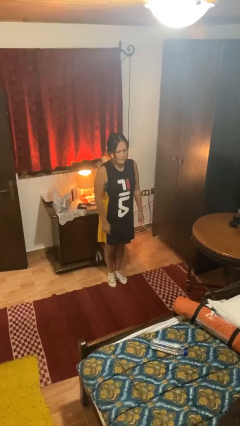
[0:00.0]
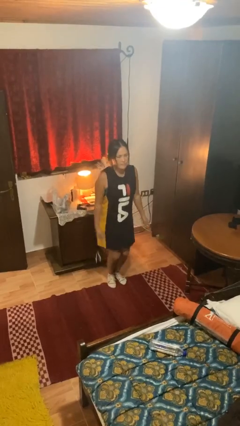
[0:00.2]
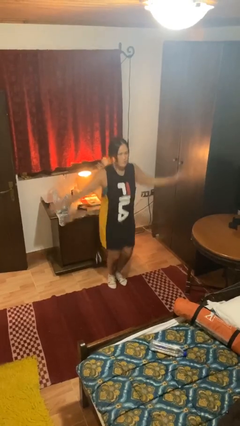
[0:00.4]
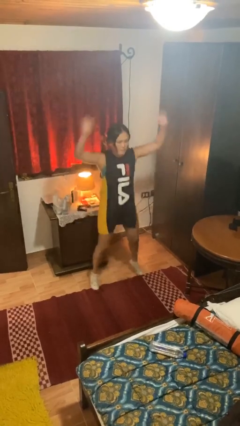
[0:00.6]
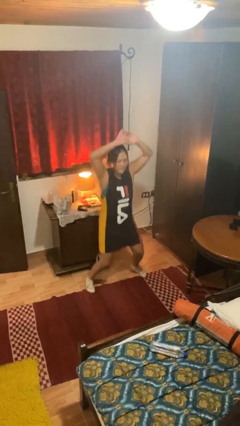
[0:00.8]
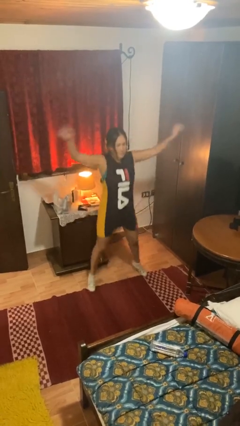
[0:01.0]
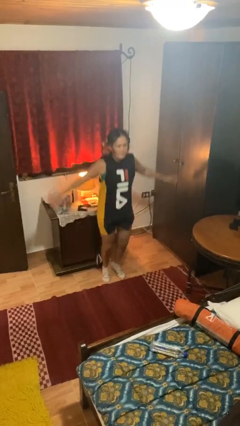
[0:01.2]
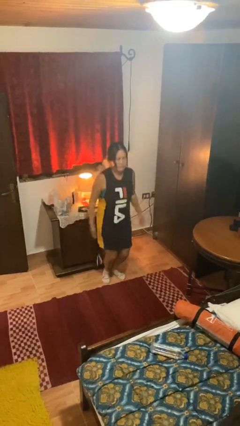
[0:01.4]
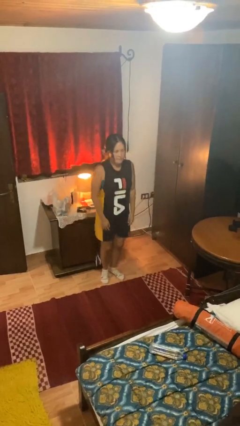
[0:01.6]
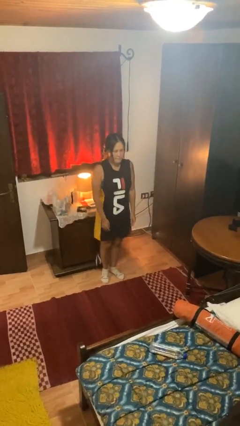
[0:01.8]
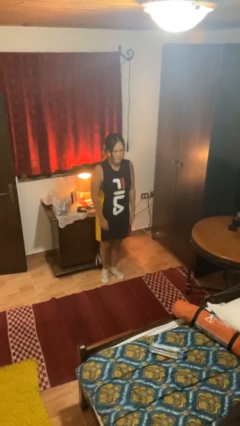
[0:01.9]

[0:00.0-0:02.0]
person exercises with jumping jacks

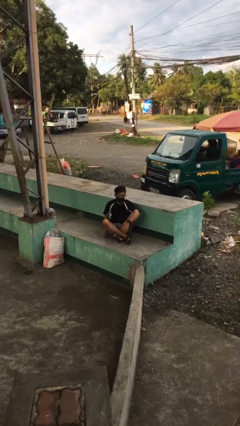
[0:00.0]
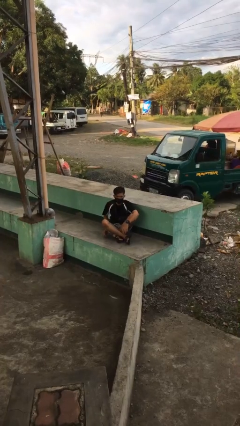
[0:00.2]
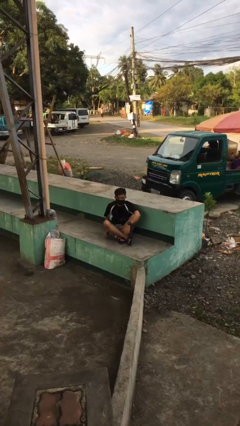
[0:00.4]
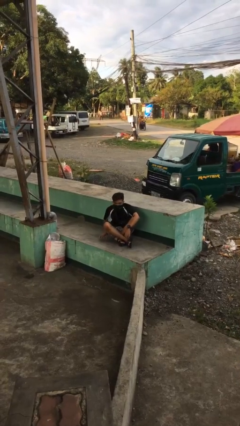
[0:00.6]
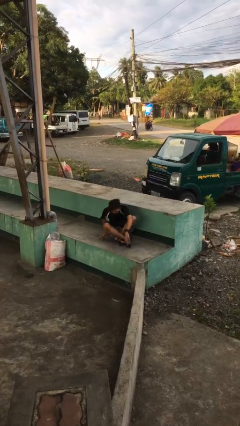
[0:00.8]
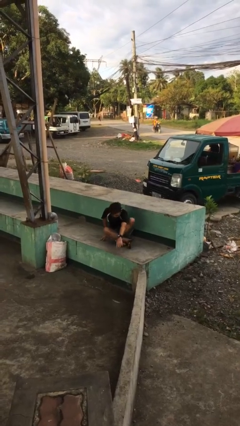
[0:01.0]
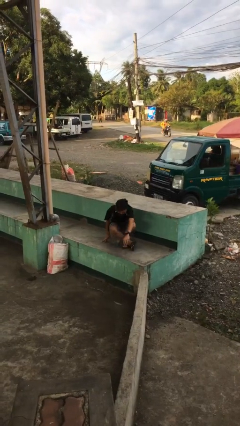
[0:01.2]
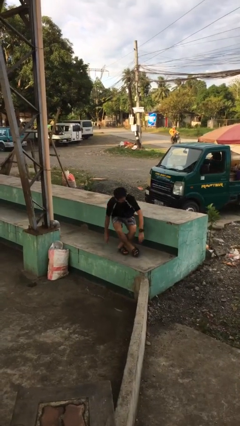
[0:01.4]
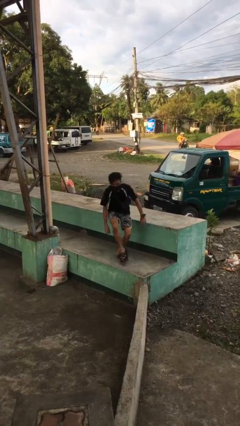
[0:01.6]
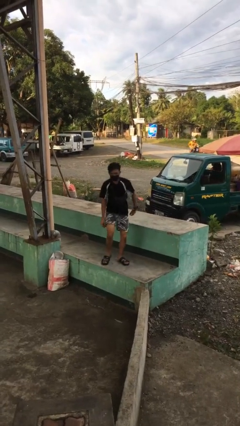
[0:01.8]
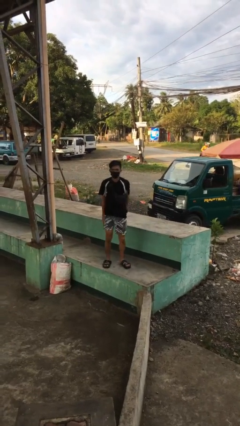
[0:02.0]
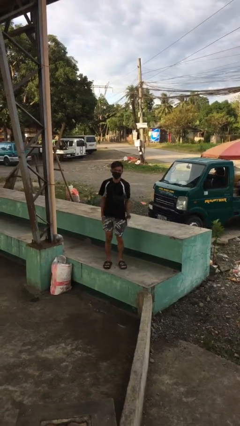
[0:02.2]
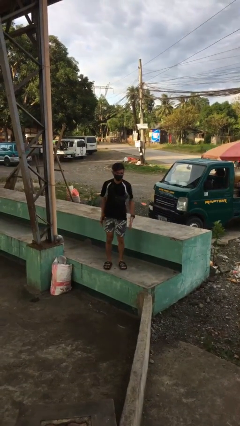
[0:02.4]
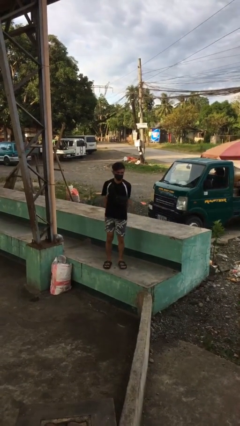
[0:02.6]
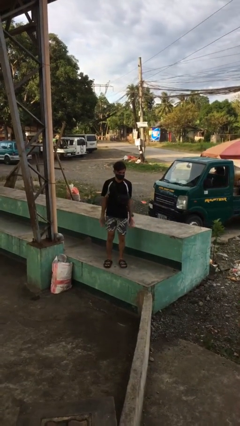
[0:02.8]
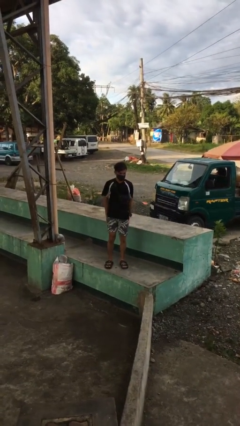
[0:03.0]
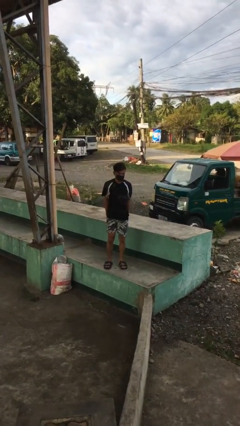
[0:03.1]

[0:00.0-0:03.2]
person stands up from floor

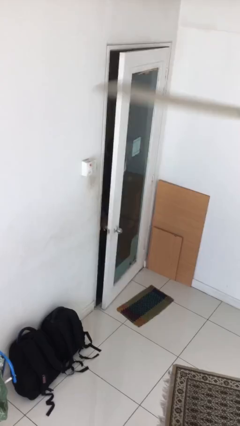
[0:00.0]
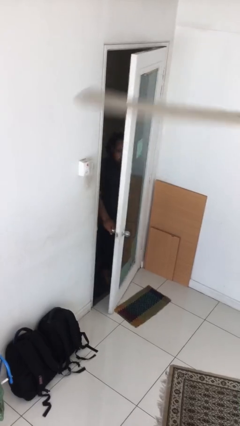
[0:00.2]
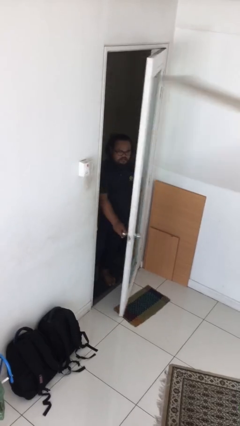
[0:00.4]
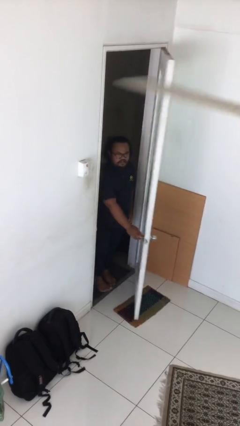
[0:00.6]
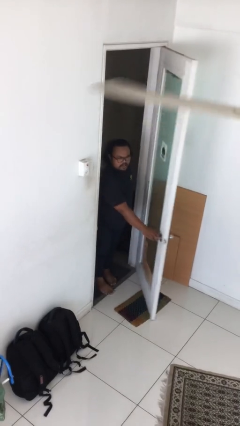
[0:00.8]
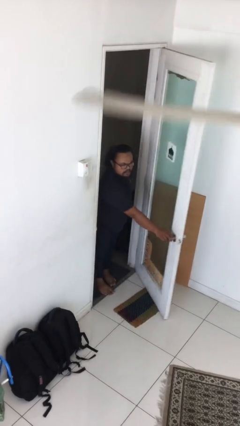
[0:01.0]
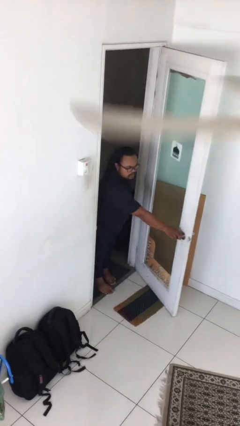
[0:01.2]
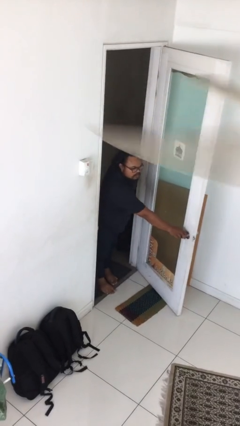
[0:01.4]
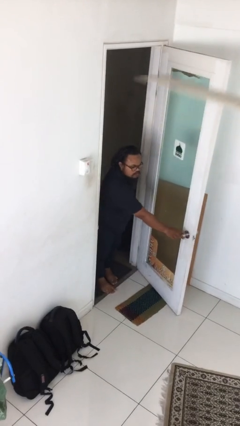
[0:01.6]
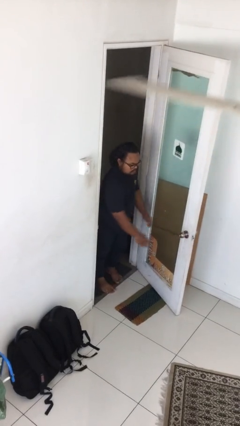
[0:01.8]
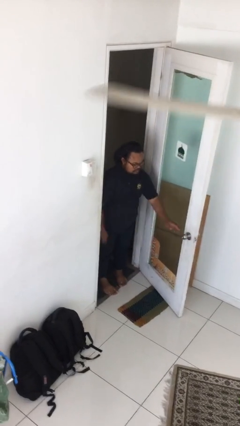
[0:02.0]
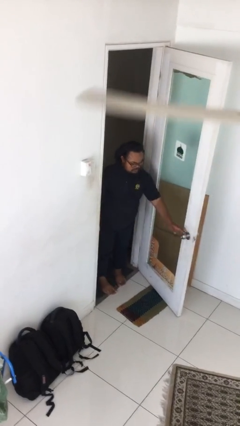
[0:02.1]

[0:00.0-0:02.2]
person opens facility door

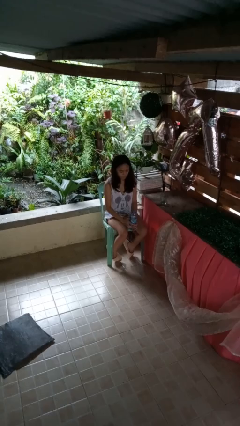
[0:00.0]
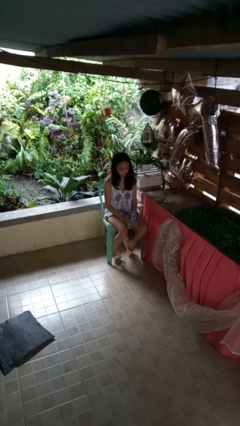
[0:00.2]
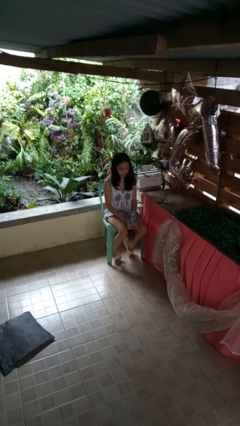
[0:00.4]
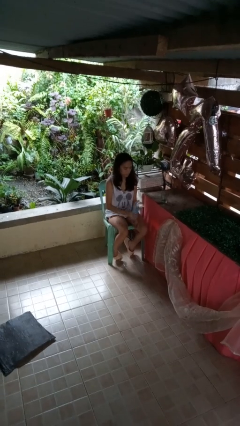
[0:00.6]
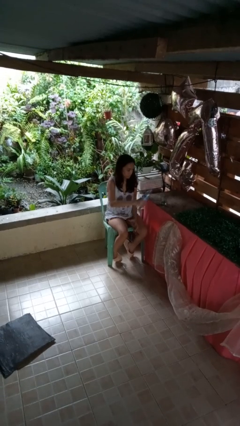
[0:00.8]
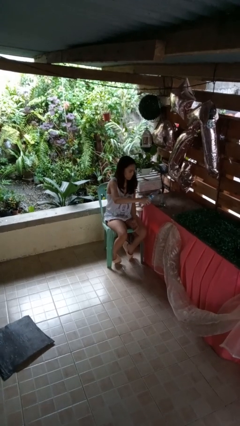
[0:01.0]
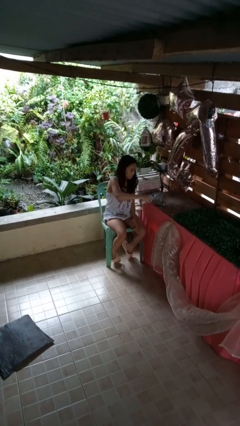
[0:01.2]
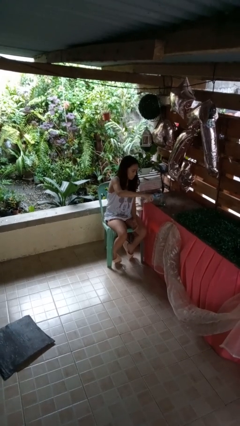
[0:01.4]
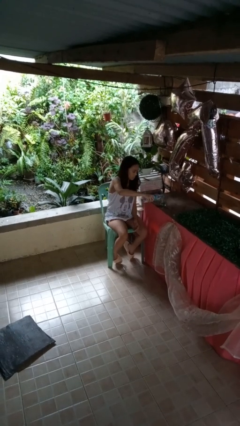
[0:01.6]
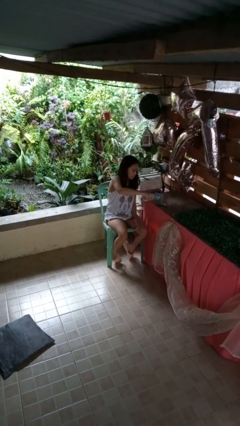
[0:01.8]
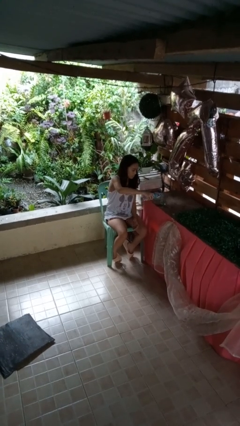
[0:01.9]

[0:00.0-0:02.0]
person pours liquid into cup

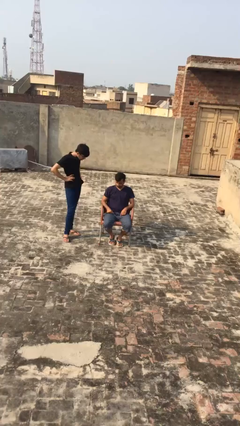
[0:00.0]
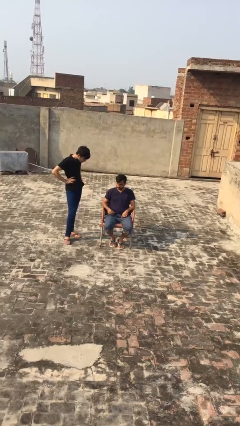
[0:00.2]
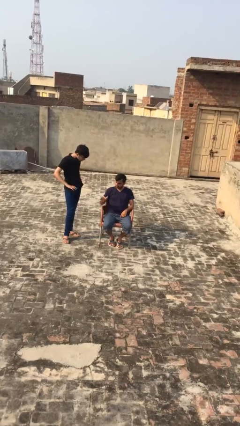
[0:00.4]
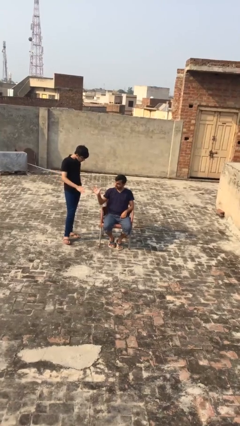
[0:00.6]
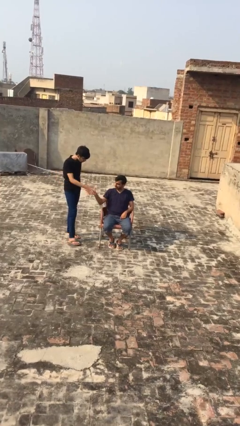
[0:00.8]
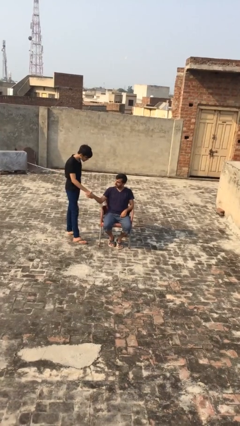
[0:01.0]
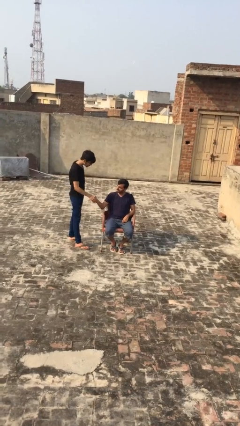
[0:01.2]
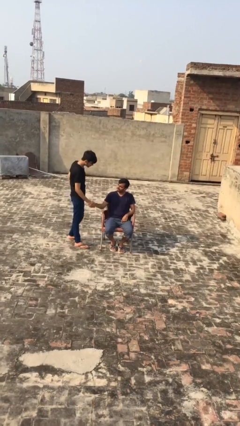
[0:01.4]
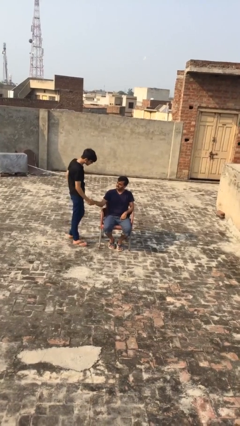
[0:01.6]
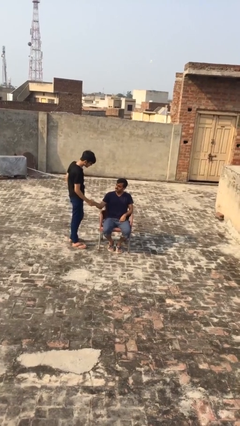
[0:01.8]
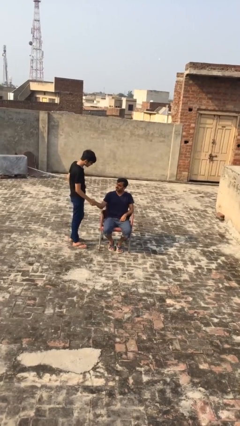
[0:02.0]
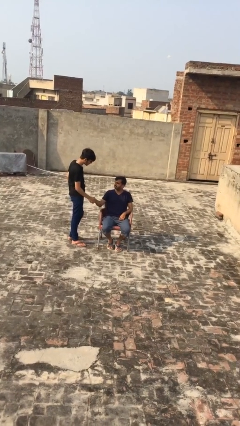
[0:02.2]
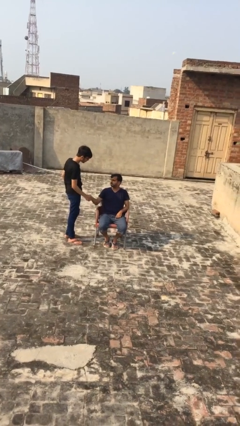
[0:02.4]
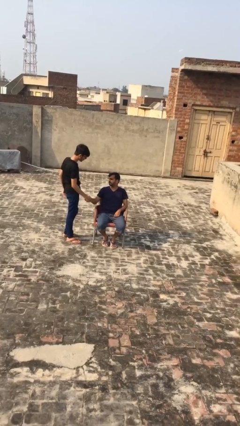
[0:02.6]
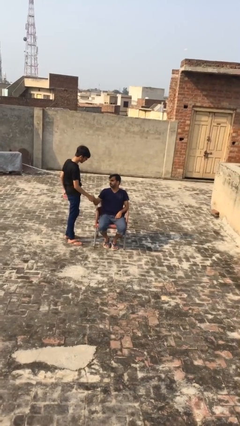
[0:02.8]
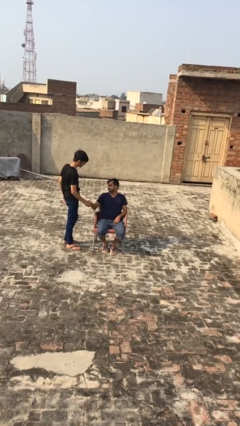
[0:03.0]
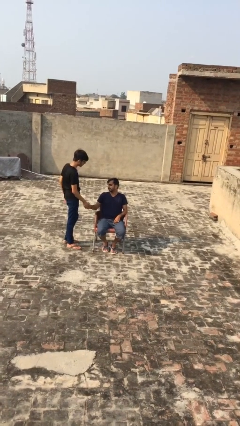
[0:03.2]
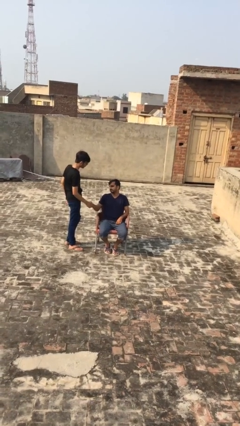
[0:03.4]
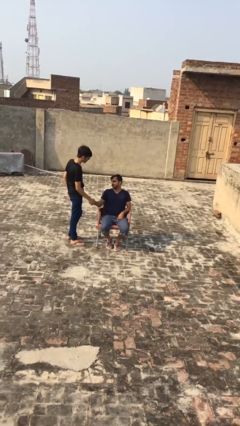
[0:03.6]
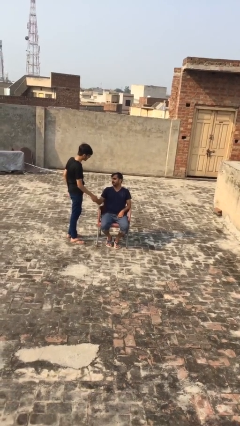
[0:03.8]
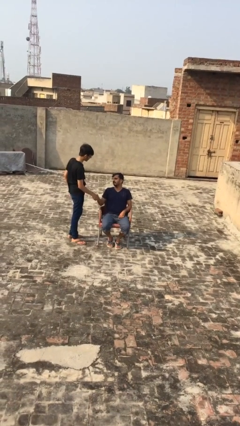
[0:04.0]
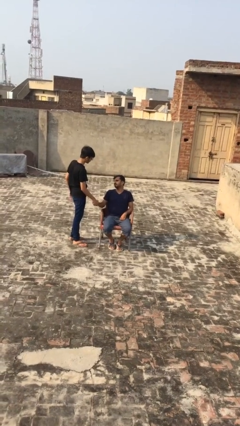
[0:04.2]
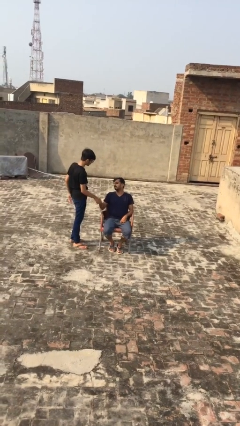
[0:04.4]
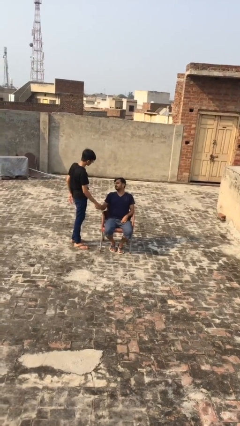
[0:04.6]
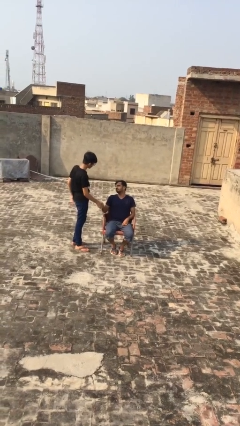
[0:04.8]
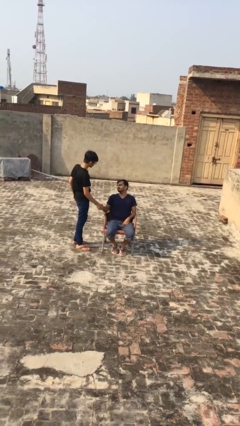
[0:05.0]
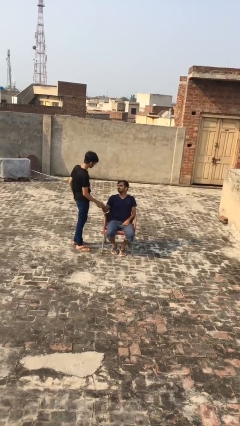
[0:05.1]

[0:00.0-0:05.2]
person shakes hand

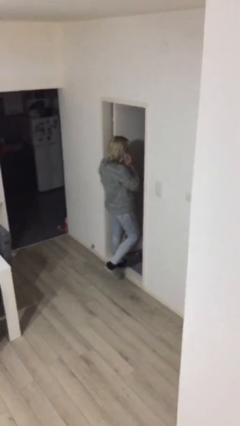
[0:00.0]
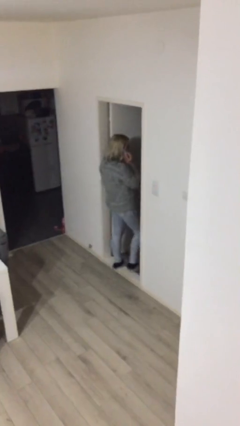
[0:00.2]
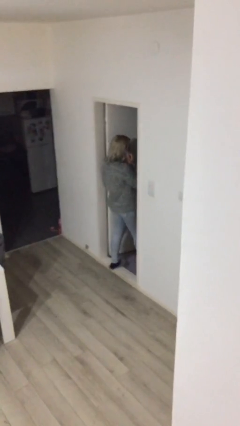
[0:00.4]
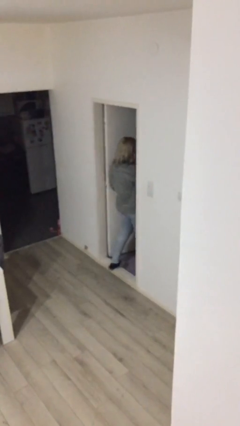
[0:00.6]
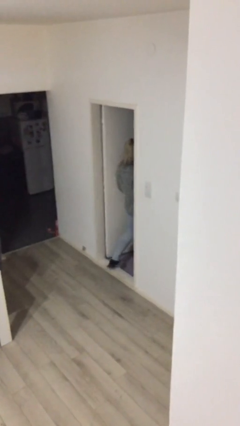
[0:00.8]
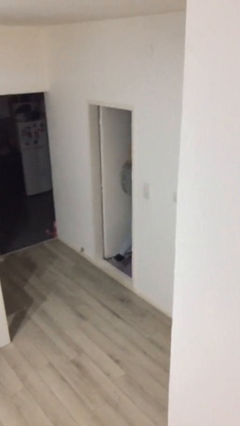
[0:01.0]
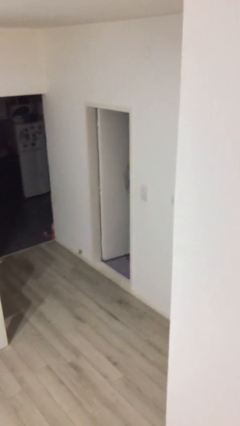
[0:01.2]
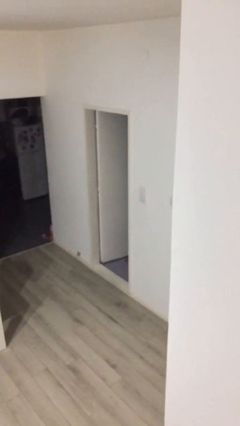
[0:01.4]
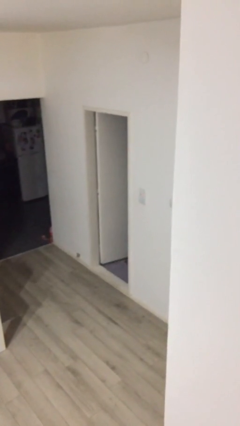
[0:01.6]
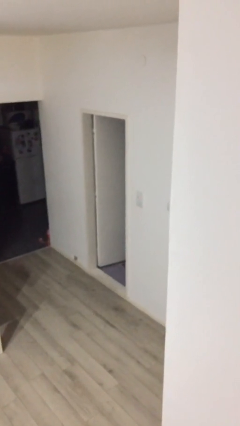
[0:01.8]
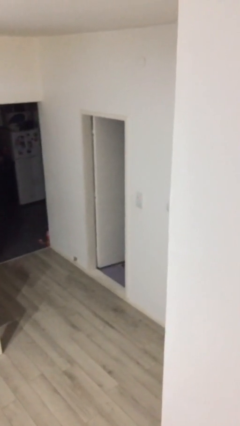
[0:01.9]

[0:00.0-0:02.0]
person exits scene through structure

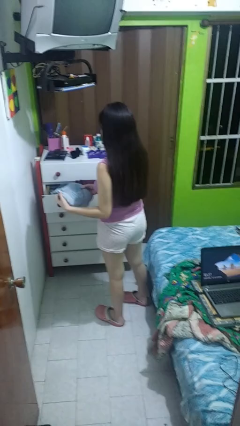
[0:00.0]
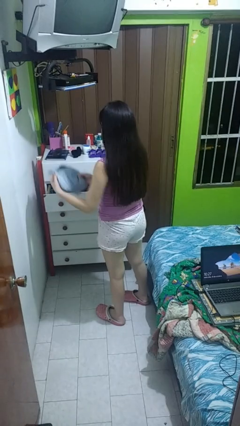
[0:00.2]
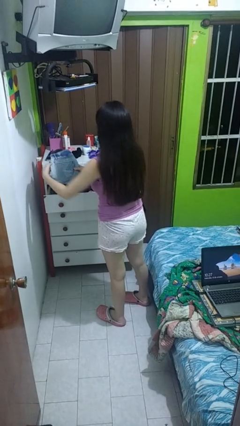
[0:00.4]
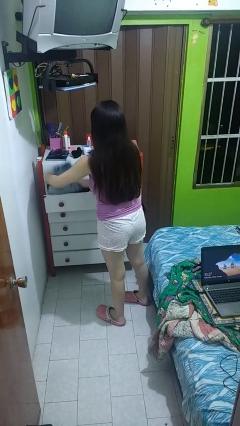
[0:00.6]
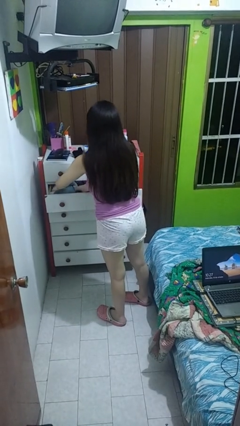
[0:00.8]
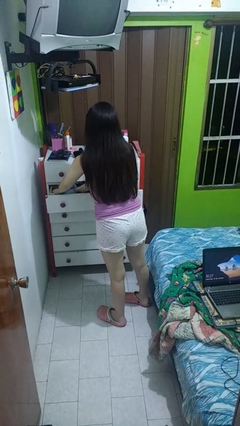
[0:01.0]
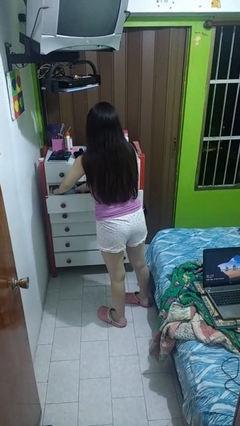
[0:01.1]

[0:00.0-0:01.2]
person puts clothes into dresser
